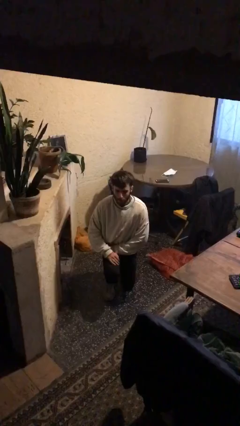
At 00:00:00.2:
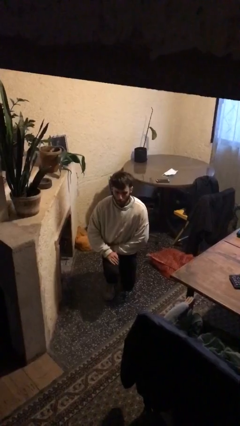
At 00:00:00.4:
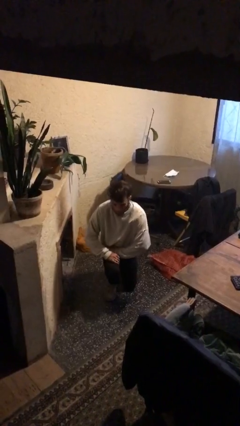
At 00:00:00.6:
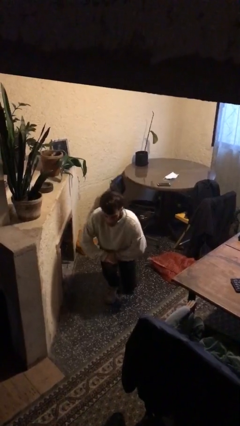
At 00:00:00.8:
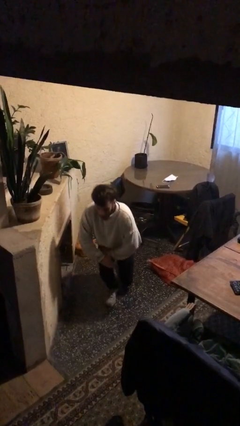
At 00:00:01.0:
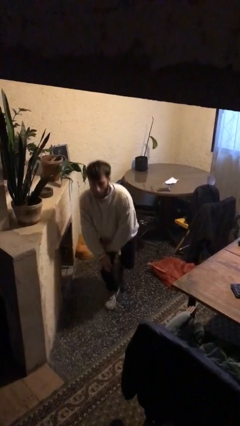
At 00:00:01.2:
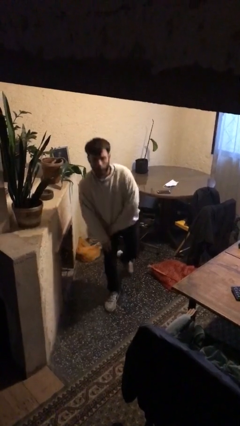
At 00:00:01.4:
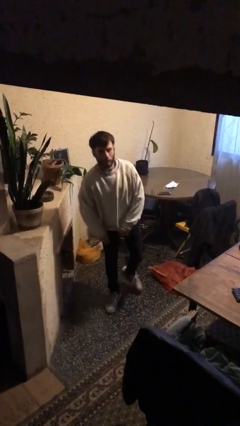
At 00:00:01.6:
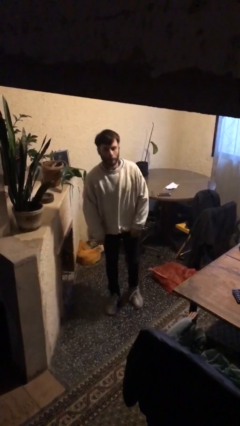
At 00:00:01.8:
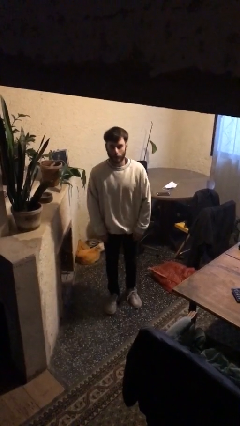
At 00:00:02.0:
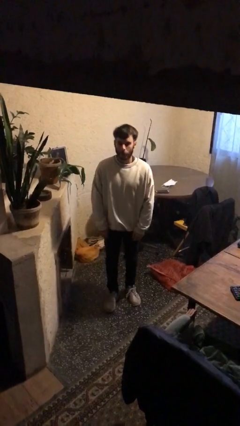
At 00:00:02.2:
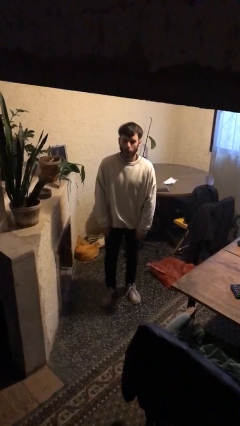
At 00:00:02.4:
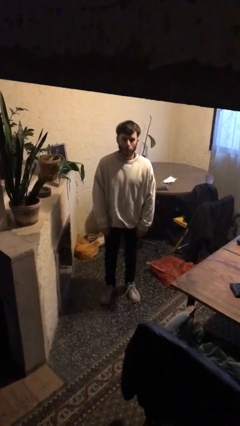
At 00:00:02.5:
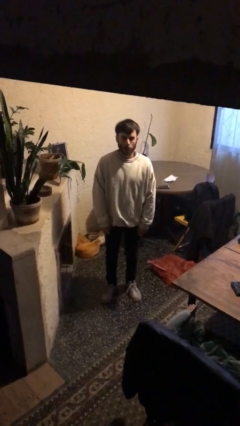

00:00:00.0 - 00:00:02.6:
person stands up from floor

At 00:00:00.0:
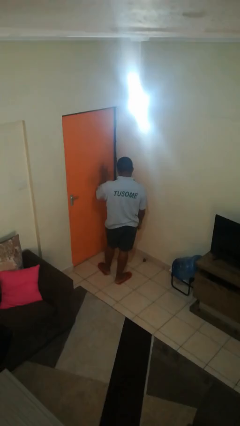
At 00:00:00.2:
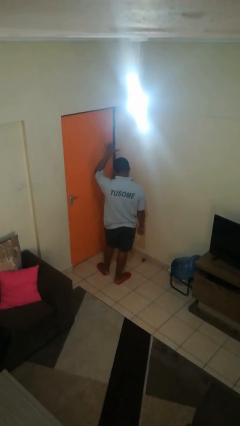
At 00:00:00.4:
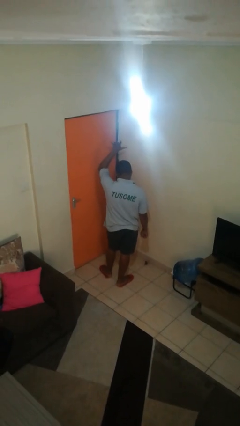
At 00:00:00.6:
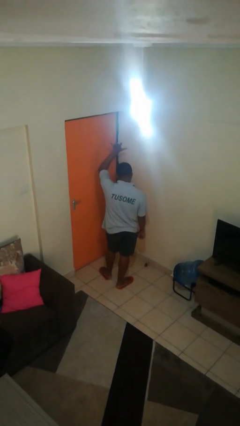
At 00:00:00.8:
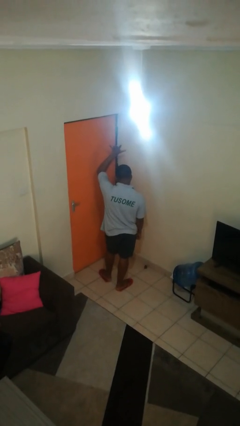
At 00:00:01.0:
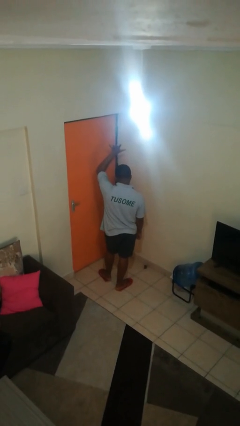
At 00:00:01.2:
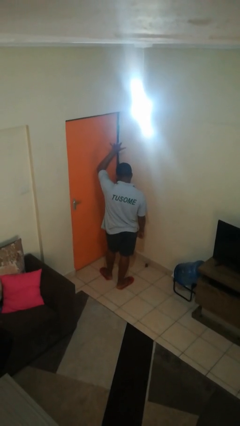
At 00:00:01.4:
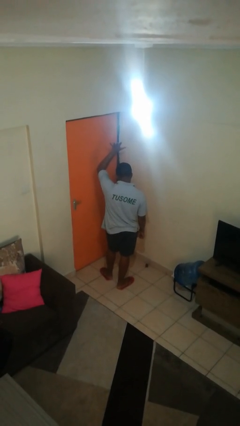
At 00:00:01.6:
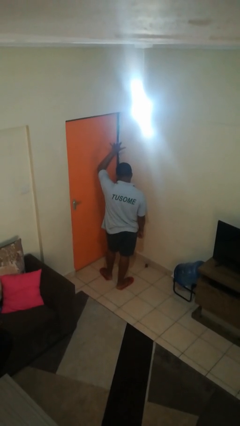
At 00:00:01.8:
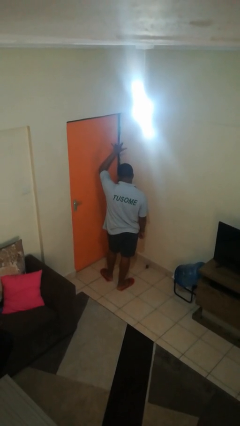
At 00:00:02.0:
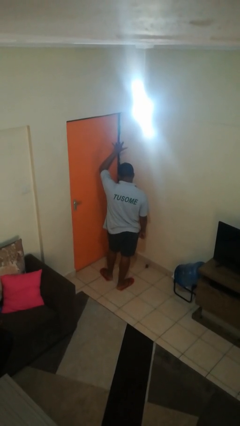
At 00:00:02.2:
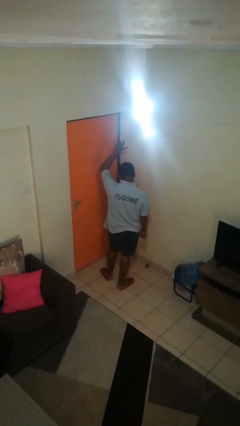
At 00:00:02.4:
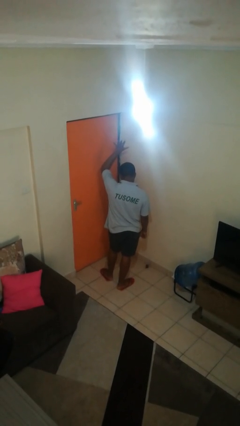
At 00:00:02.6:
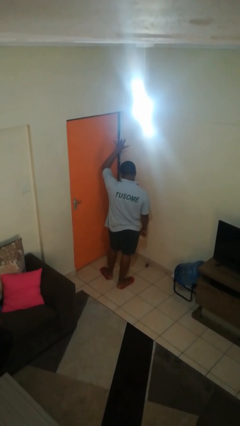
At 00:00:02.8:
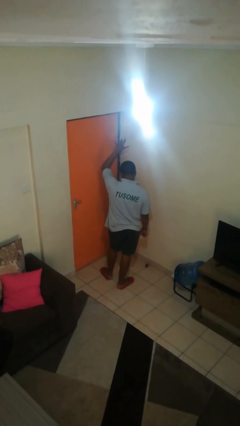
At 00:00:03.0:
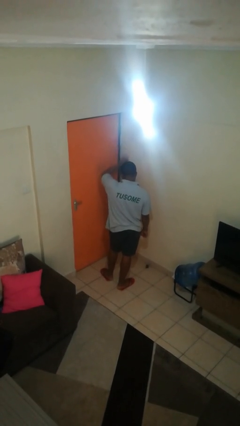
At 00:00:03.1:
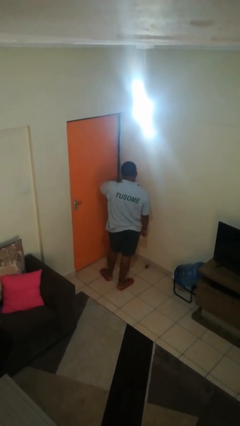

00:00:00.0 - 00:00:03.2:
person gestures number five

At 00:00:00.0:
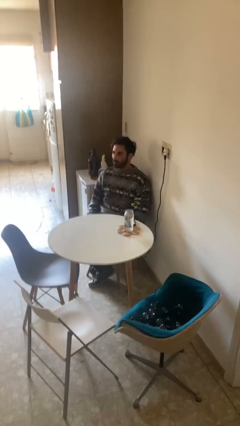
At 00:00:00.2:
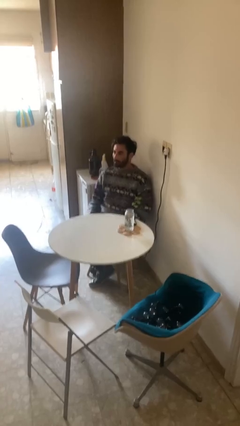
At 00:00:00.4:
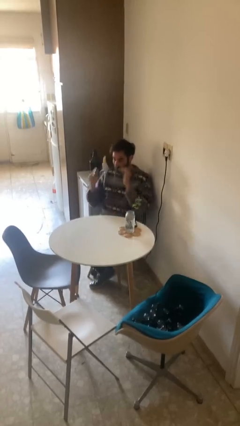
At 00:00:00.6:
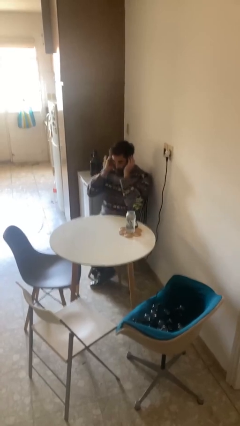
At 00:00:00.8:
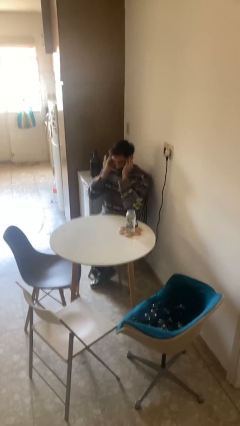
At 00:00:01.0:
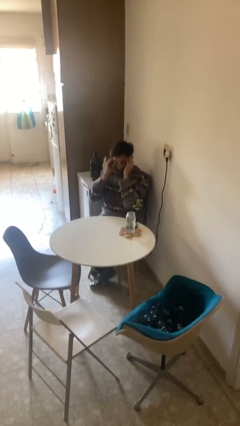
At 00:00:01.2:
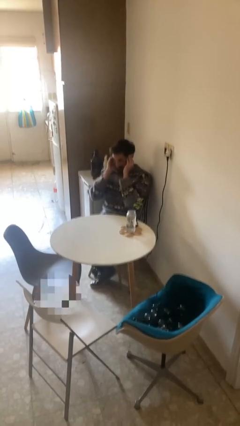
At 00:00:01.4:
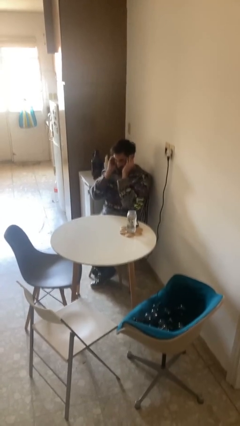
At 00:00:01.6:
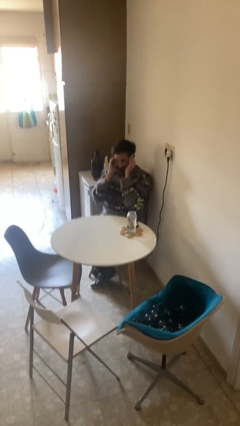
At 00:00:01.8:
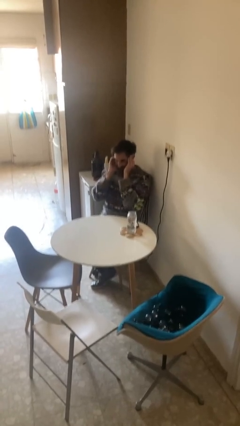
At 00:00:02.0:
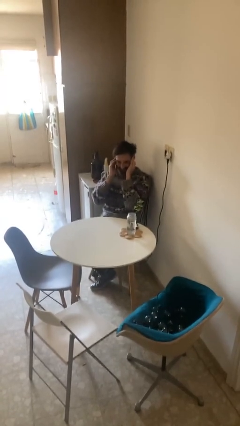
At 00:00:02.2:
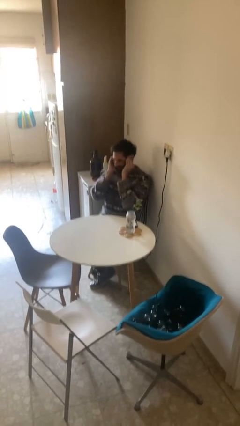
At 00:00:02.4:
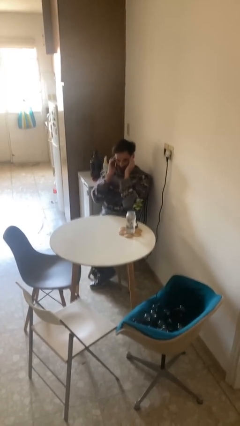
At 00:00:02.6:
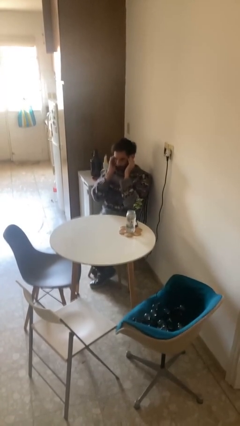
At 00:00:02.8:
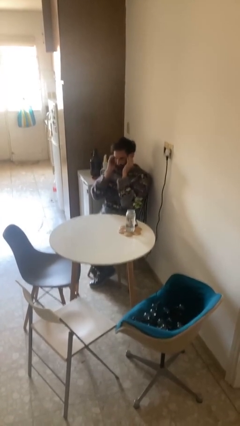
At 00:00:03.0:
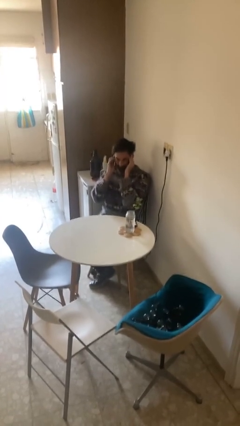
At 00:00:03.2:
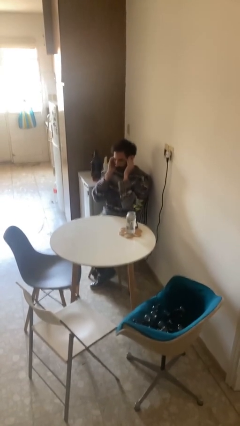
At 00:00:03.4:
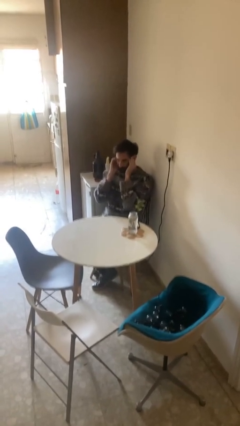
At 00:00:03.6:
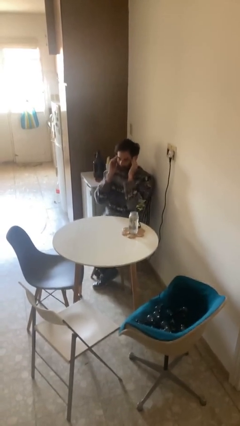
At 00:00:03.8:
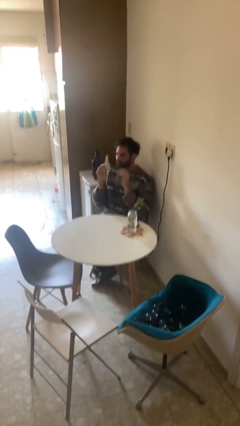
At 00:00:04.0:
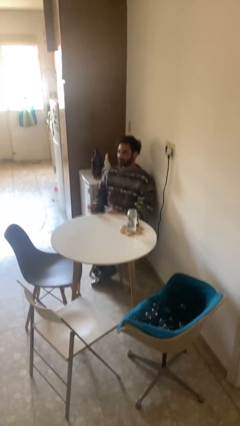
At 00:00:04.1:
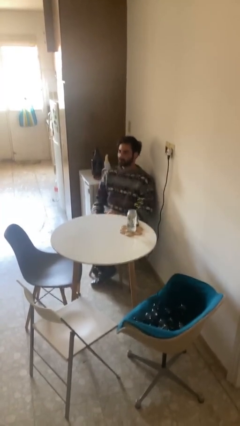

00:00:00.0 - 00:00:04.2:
person puts fingers in ear

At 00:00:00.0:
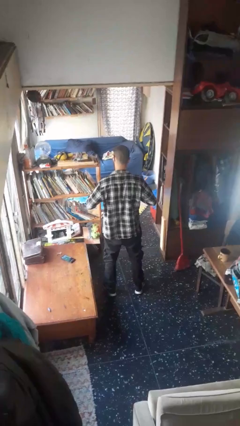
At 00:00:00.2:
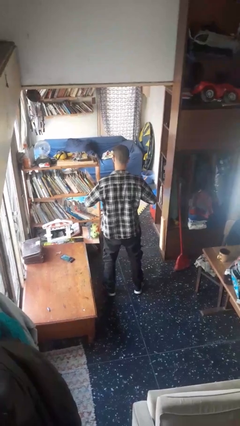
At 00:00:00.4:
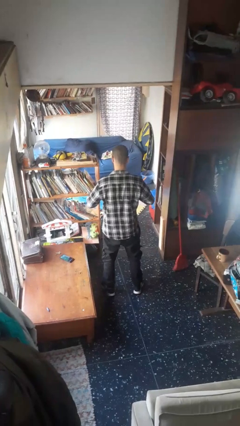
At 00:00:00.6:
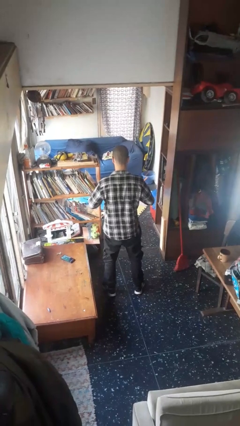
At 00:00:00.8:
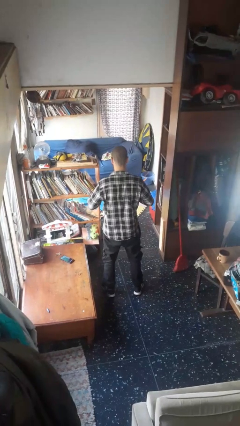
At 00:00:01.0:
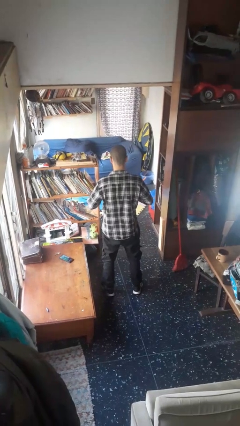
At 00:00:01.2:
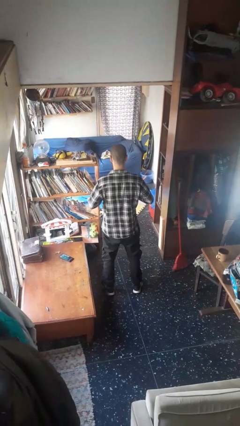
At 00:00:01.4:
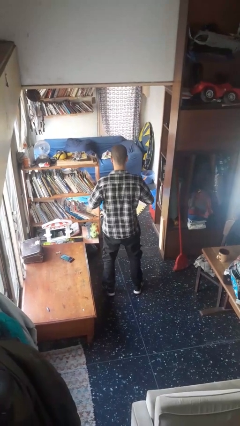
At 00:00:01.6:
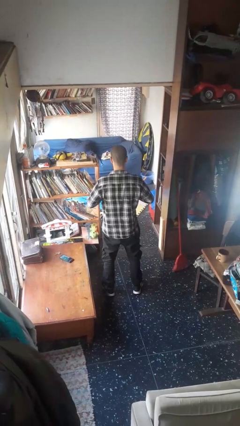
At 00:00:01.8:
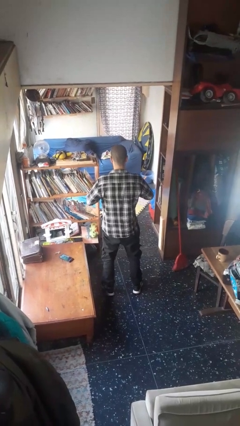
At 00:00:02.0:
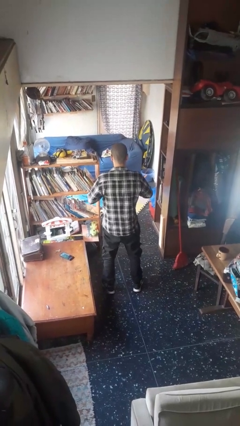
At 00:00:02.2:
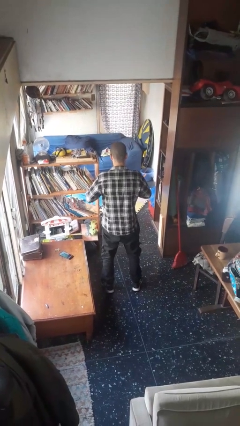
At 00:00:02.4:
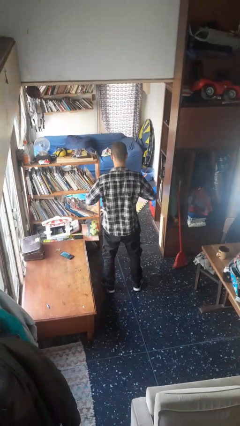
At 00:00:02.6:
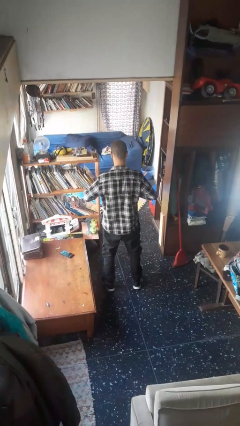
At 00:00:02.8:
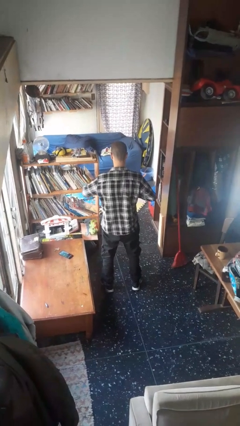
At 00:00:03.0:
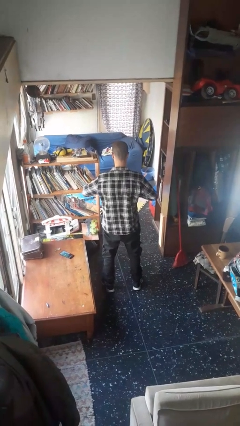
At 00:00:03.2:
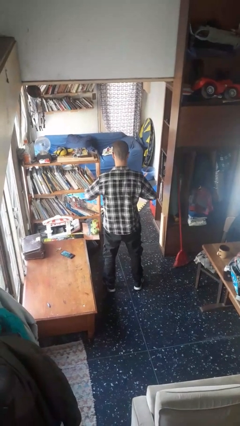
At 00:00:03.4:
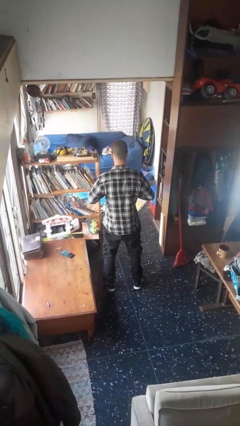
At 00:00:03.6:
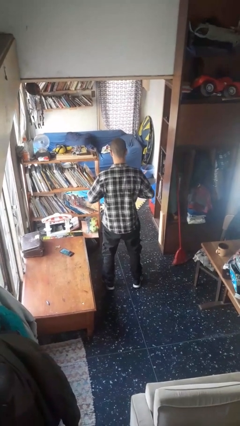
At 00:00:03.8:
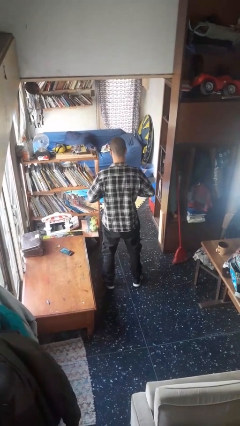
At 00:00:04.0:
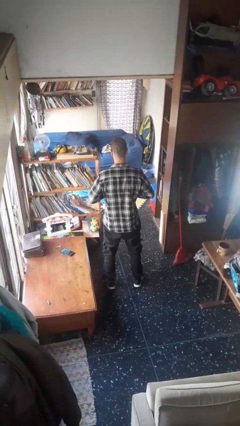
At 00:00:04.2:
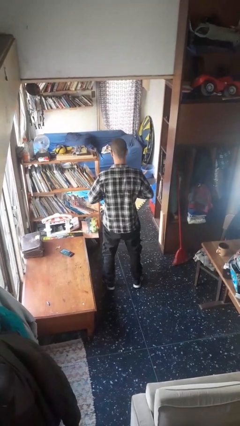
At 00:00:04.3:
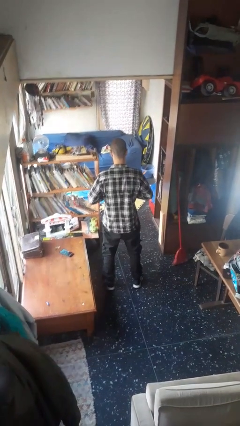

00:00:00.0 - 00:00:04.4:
person buttons shirt

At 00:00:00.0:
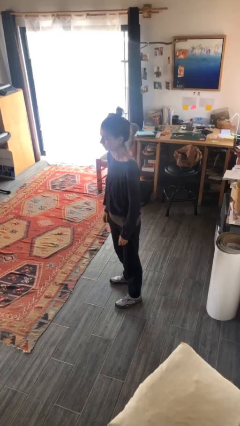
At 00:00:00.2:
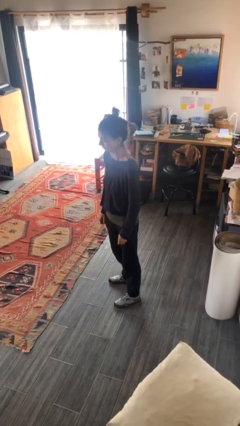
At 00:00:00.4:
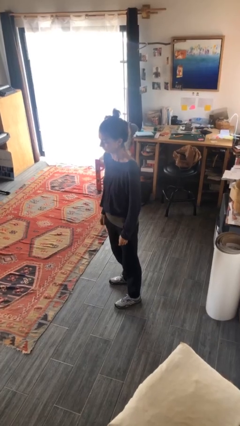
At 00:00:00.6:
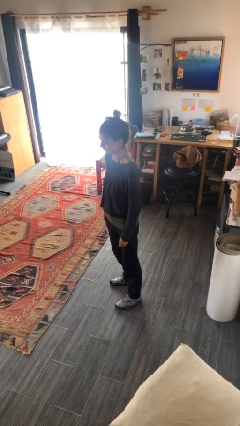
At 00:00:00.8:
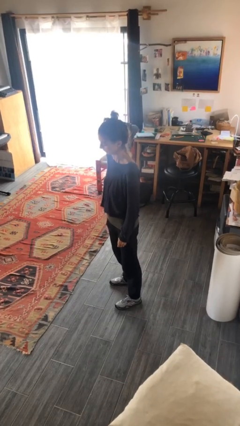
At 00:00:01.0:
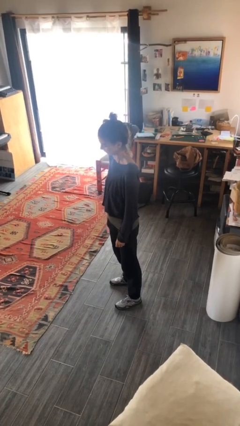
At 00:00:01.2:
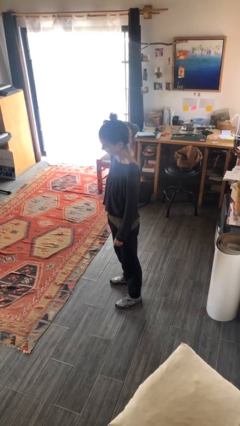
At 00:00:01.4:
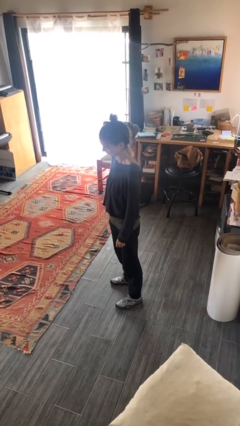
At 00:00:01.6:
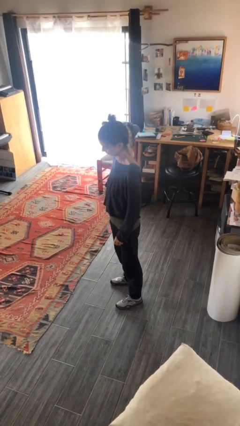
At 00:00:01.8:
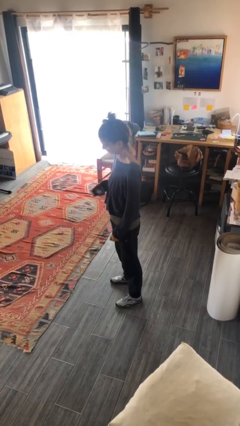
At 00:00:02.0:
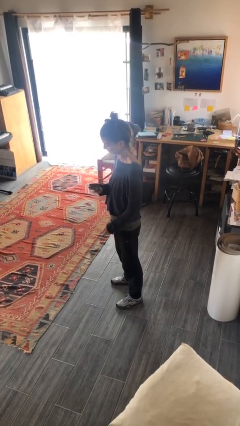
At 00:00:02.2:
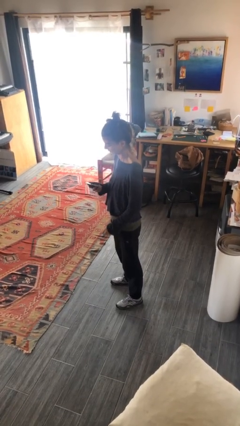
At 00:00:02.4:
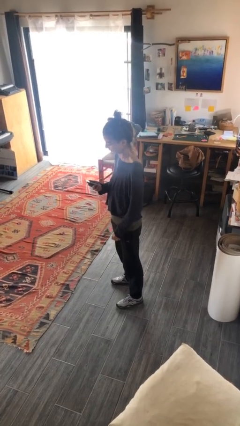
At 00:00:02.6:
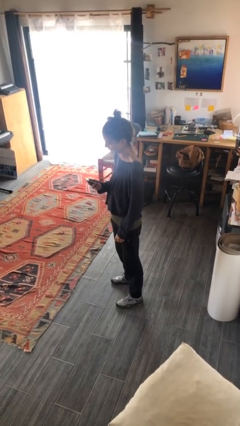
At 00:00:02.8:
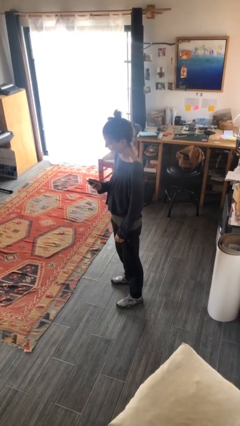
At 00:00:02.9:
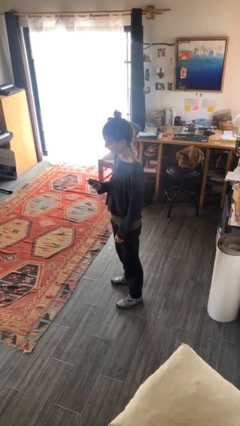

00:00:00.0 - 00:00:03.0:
person takes phone from pocket

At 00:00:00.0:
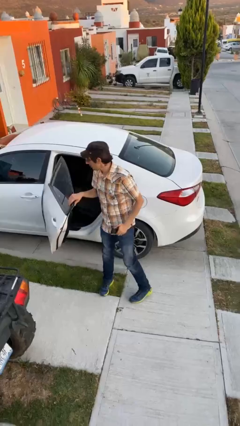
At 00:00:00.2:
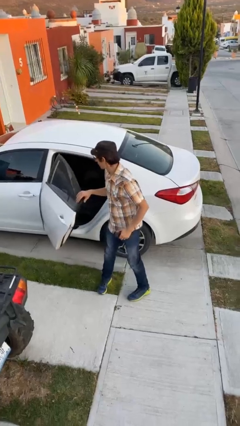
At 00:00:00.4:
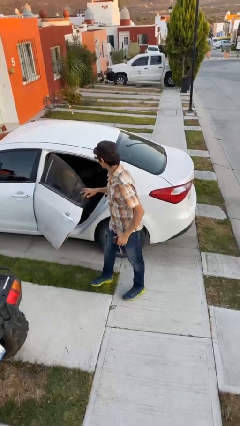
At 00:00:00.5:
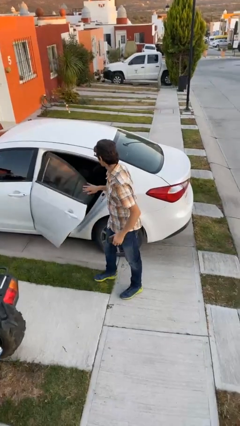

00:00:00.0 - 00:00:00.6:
person closes car door
